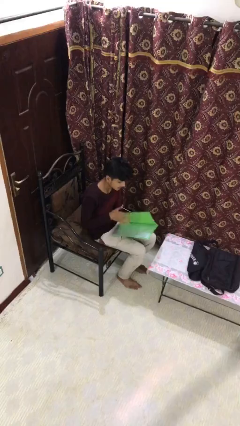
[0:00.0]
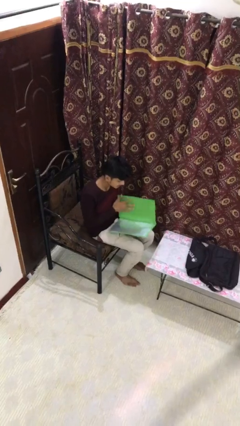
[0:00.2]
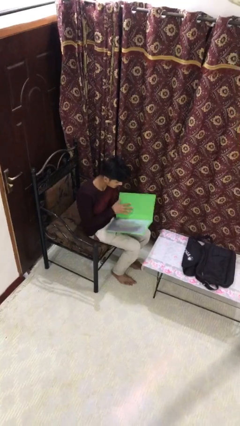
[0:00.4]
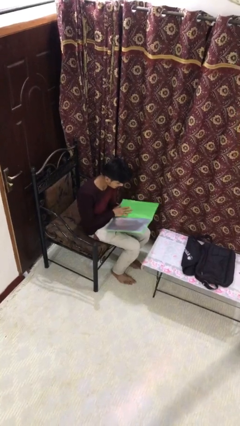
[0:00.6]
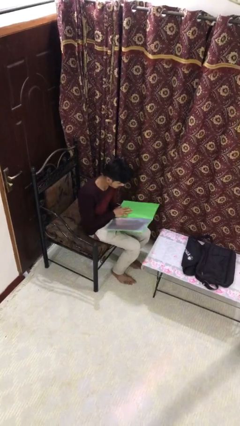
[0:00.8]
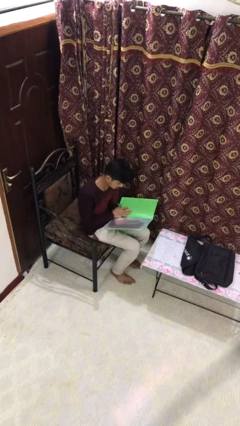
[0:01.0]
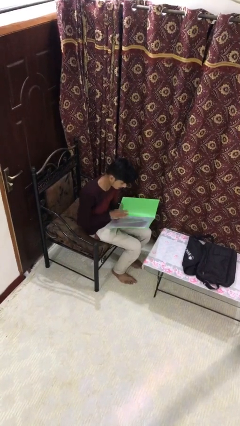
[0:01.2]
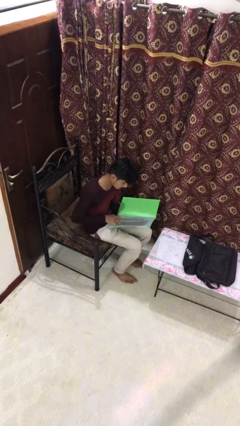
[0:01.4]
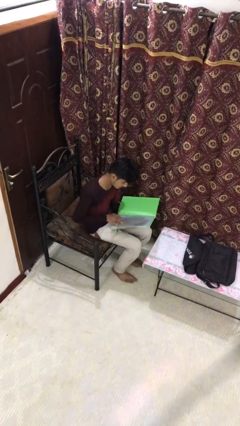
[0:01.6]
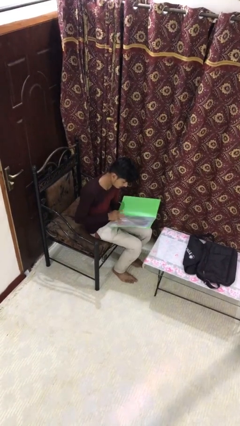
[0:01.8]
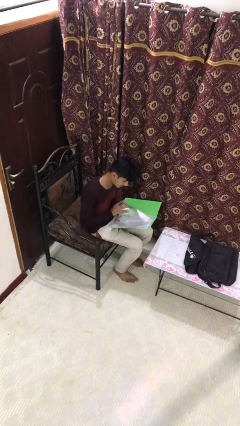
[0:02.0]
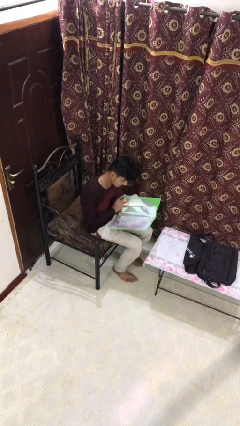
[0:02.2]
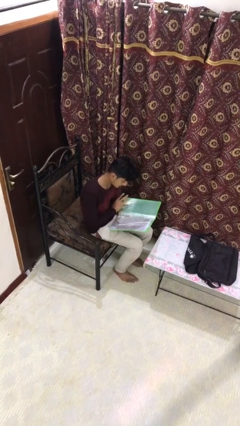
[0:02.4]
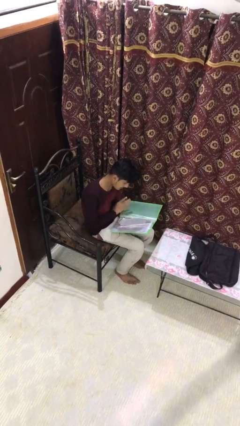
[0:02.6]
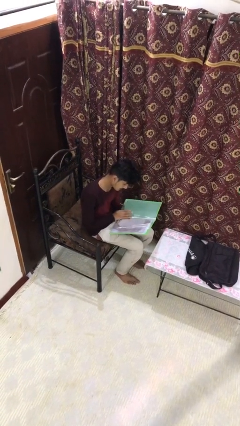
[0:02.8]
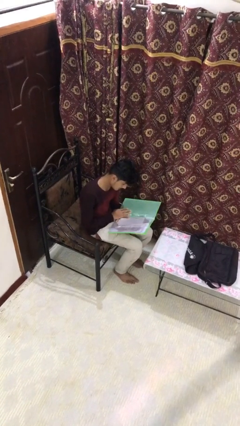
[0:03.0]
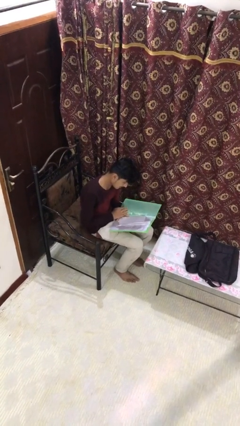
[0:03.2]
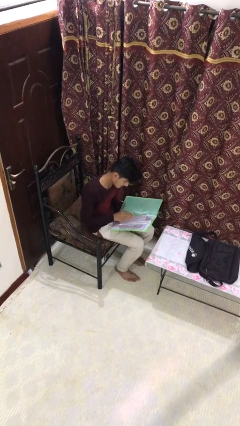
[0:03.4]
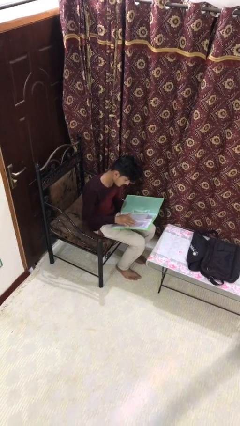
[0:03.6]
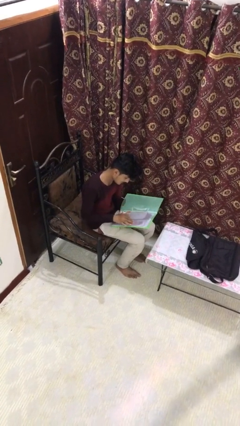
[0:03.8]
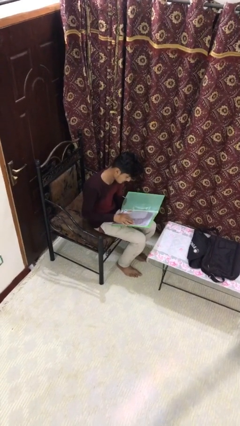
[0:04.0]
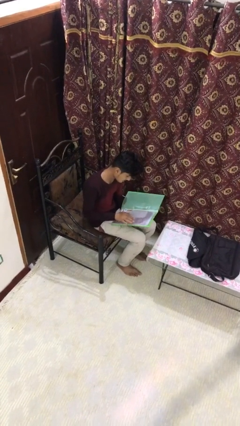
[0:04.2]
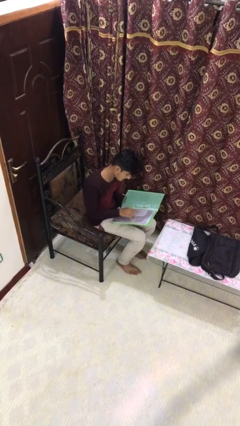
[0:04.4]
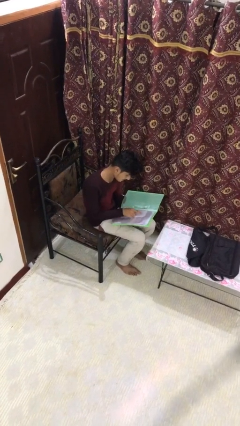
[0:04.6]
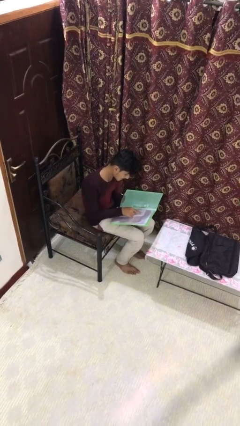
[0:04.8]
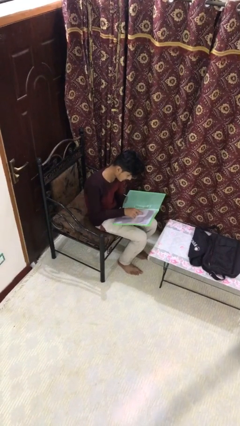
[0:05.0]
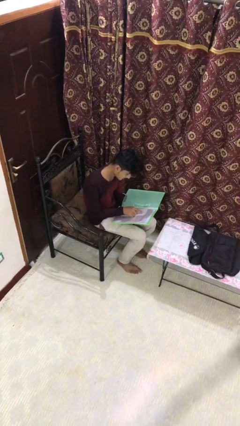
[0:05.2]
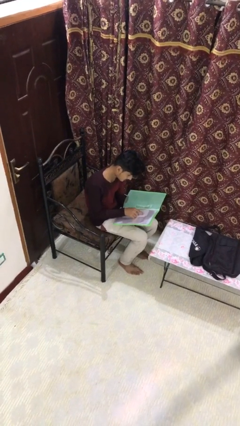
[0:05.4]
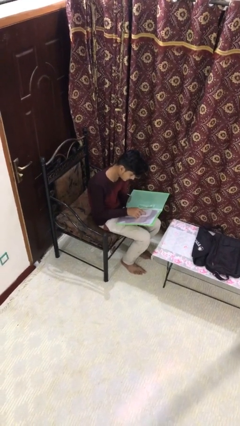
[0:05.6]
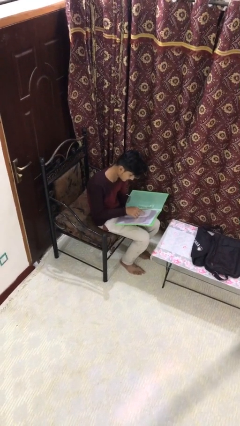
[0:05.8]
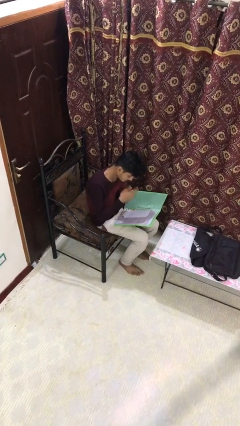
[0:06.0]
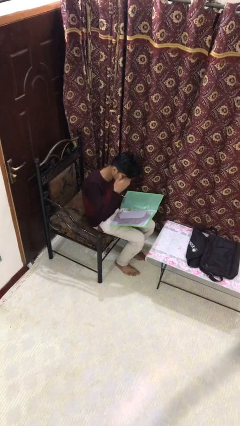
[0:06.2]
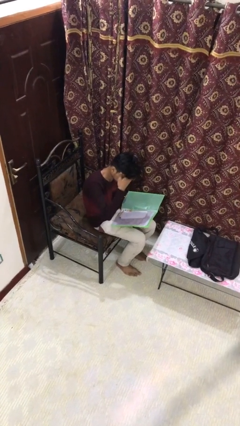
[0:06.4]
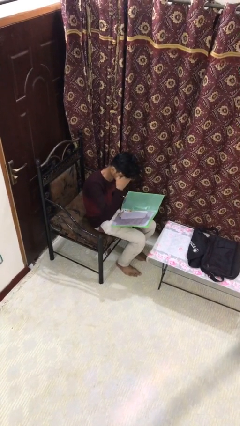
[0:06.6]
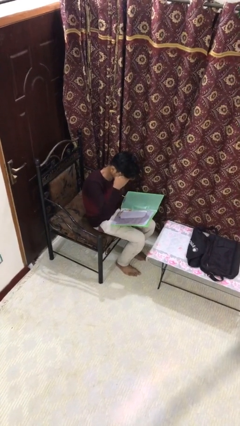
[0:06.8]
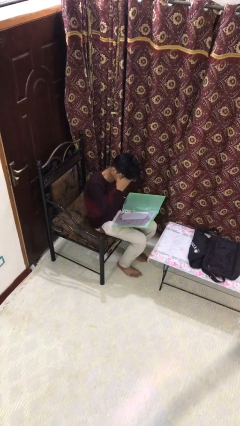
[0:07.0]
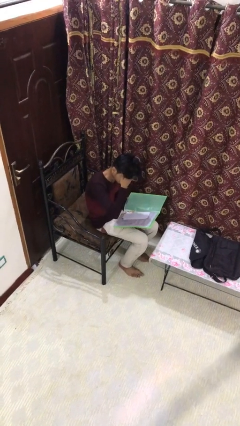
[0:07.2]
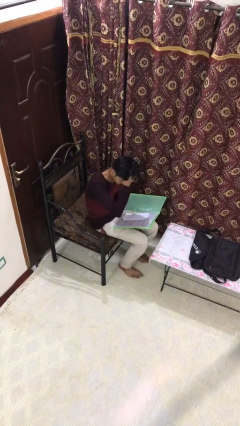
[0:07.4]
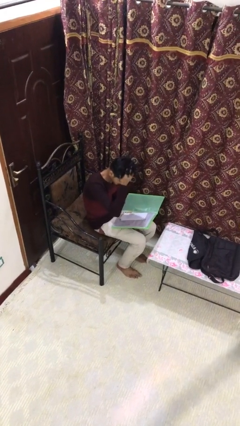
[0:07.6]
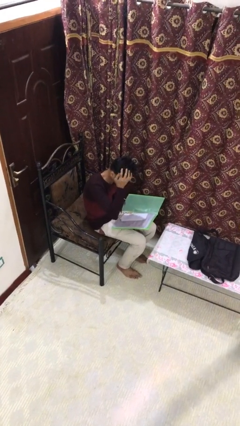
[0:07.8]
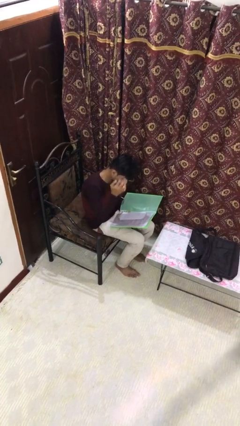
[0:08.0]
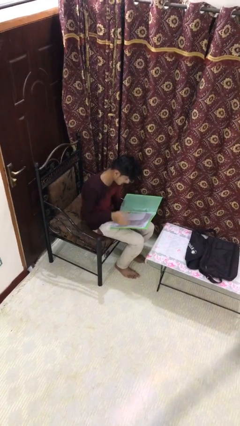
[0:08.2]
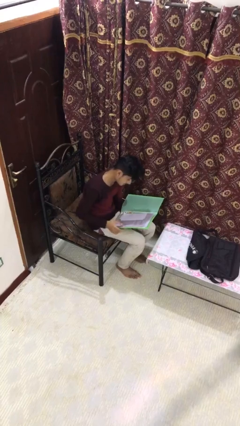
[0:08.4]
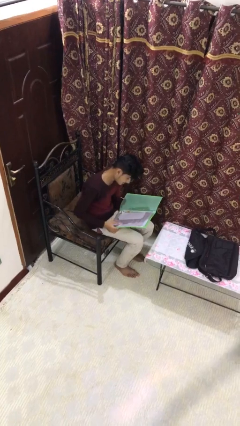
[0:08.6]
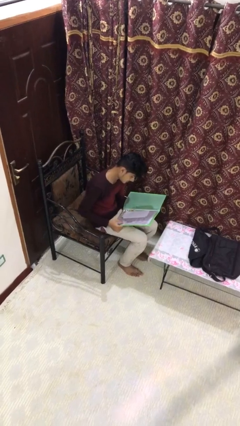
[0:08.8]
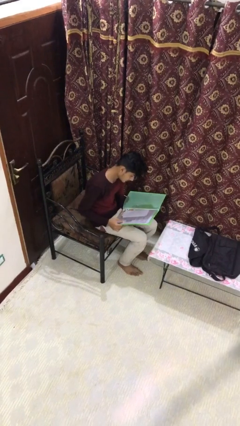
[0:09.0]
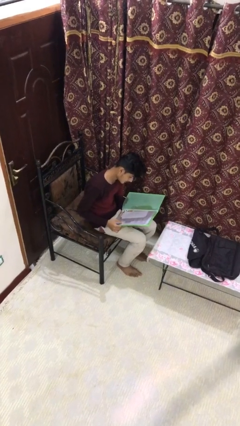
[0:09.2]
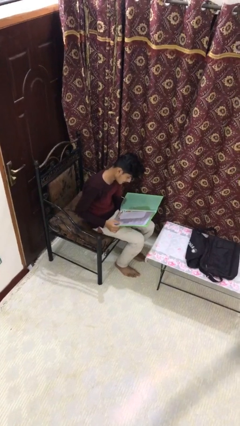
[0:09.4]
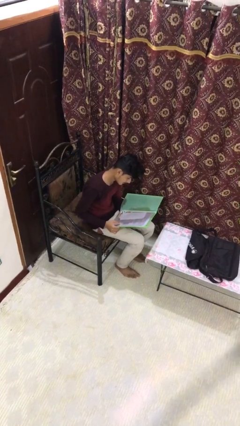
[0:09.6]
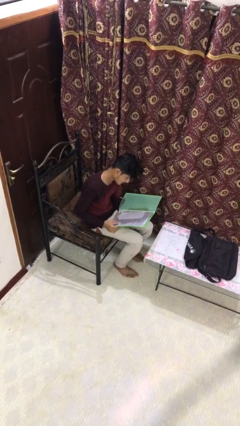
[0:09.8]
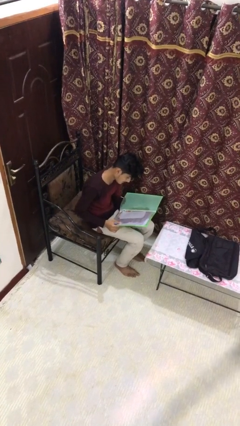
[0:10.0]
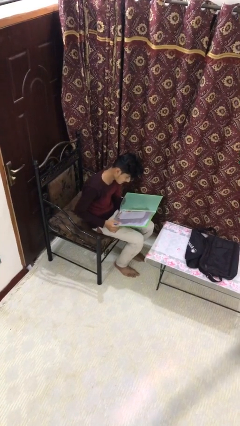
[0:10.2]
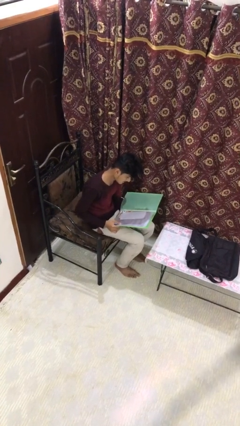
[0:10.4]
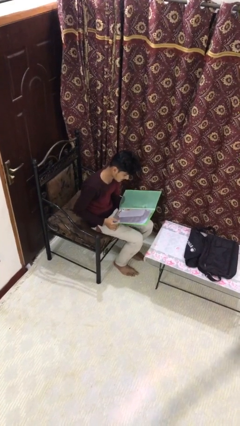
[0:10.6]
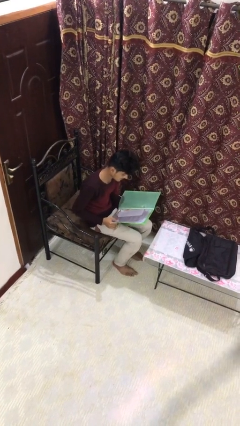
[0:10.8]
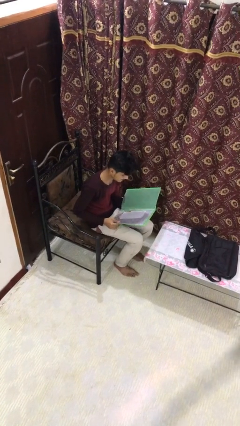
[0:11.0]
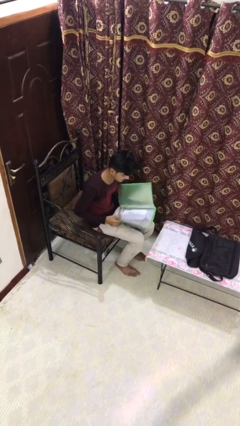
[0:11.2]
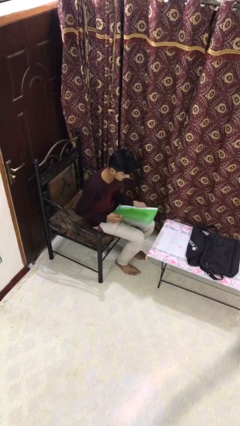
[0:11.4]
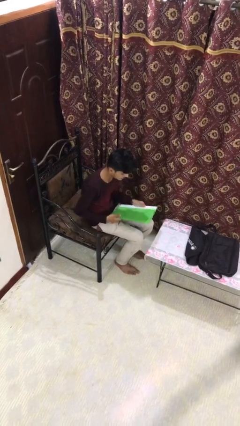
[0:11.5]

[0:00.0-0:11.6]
person reads document

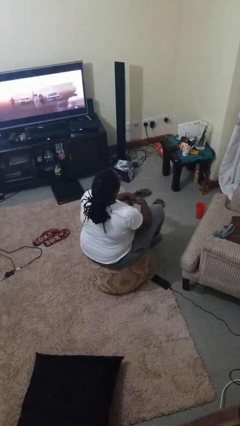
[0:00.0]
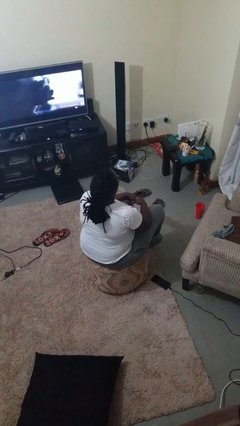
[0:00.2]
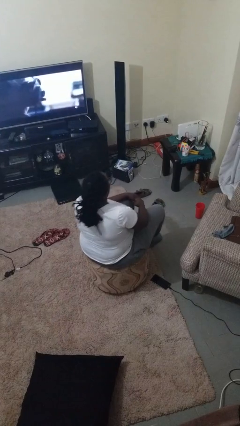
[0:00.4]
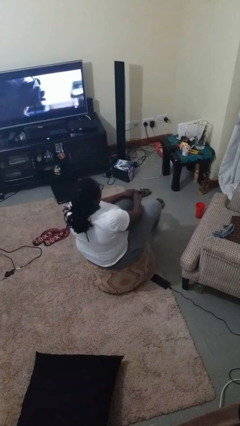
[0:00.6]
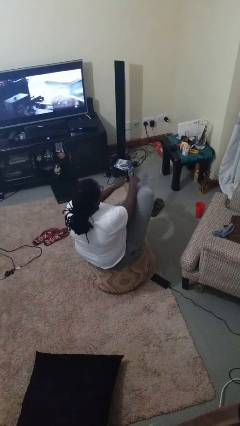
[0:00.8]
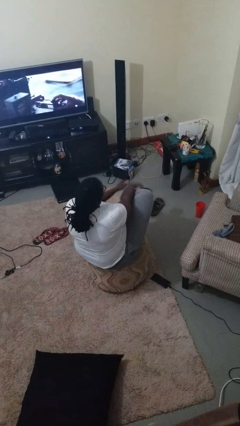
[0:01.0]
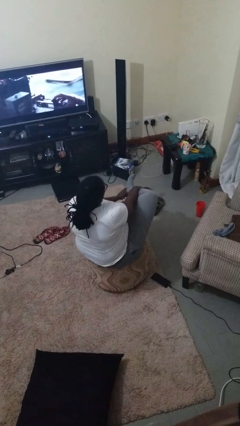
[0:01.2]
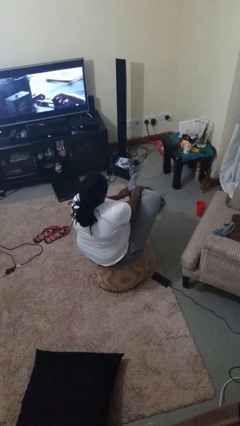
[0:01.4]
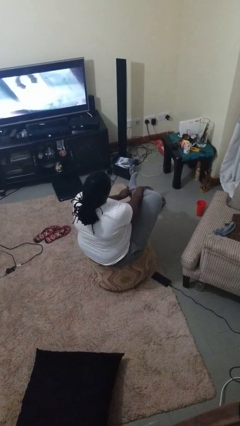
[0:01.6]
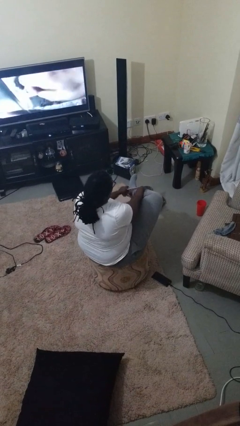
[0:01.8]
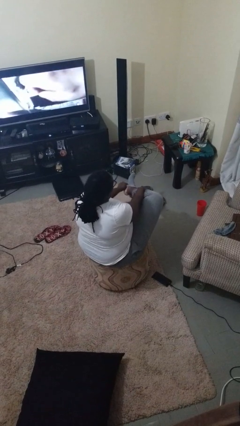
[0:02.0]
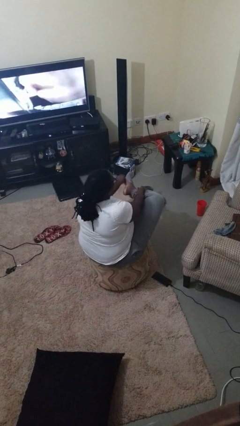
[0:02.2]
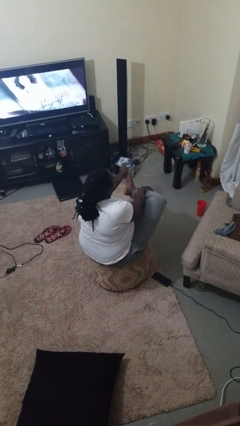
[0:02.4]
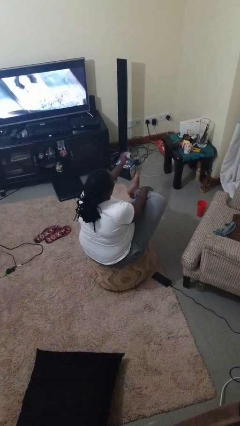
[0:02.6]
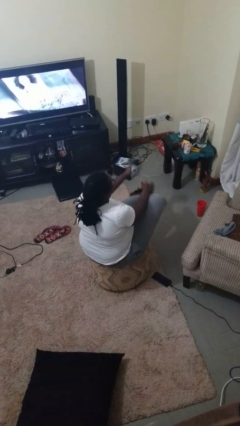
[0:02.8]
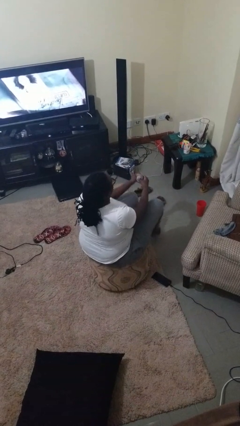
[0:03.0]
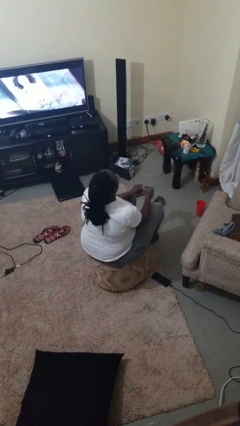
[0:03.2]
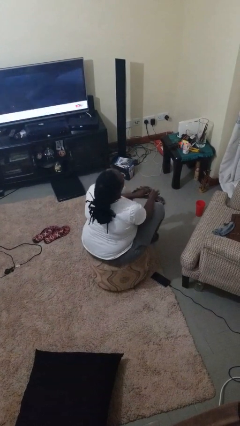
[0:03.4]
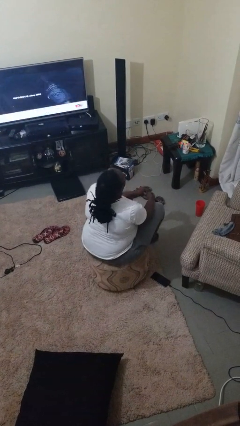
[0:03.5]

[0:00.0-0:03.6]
person takes off socks

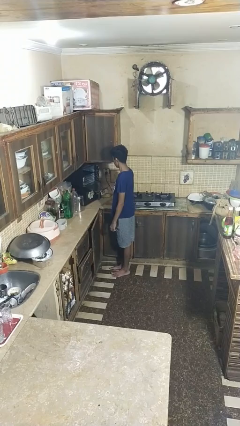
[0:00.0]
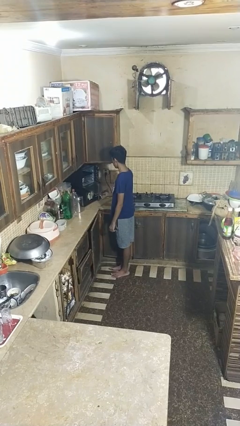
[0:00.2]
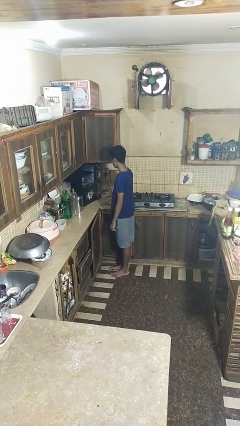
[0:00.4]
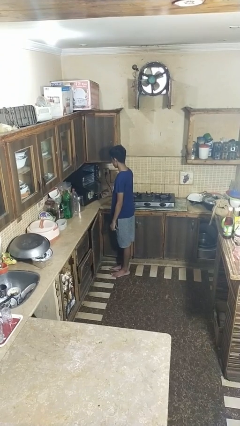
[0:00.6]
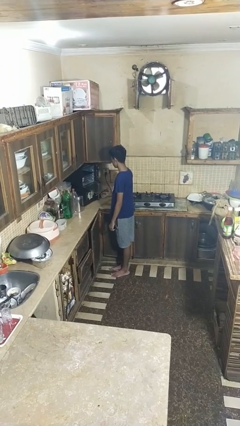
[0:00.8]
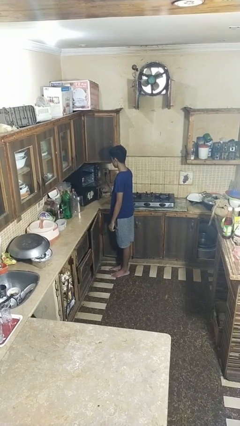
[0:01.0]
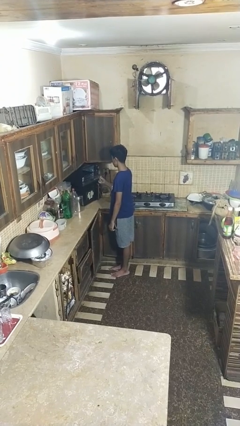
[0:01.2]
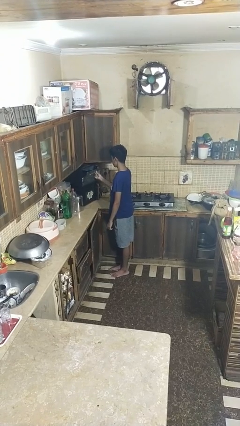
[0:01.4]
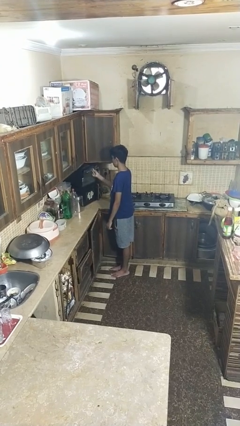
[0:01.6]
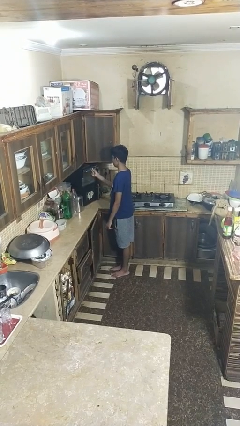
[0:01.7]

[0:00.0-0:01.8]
person closes oven door

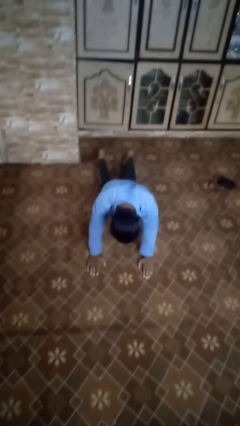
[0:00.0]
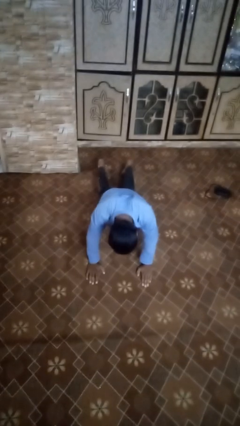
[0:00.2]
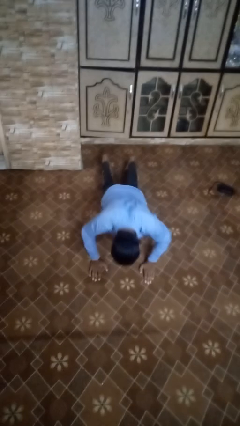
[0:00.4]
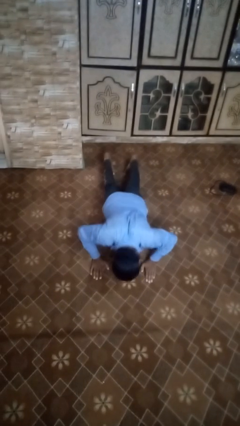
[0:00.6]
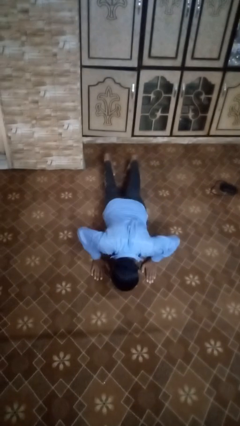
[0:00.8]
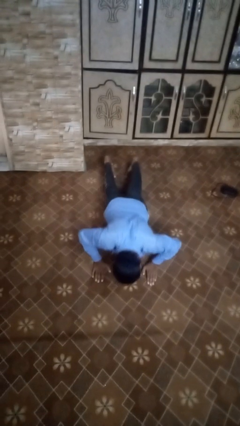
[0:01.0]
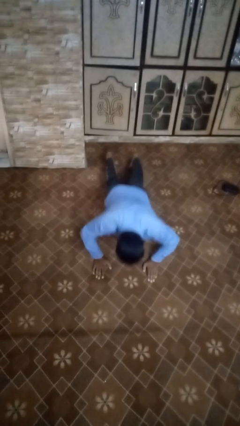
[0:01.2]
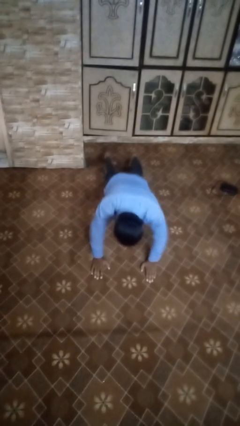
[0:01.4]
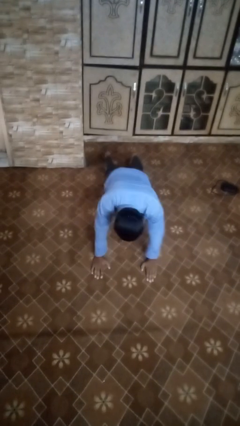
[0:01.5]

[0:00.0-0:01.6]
person exercises with pushup
